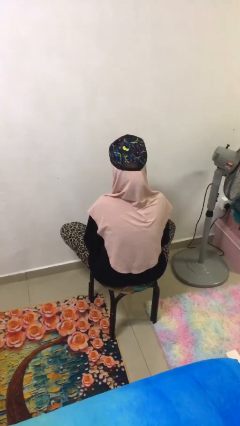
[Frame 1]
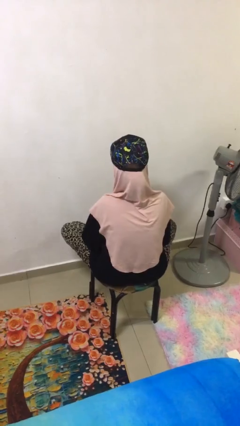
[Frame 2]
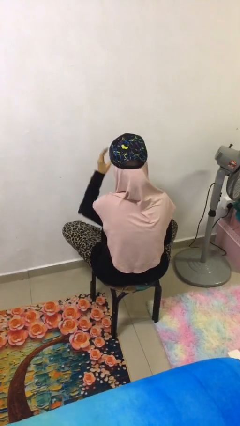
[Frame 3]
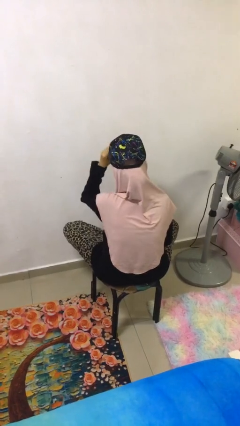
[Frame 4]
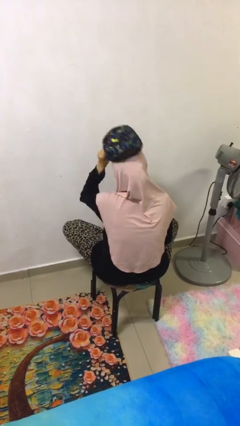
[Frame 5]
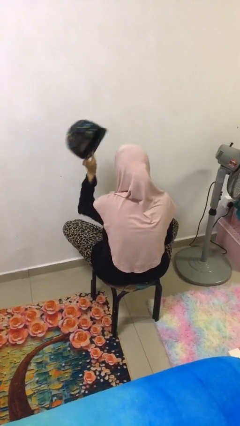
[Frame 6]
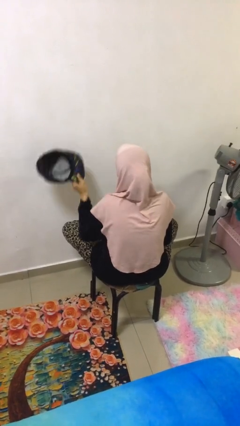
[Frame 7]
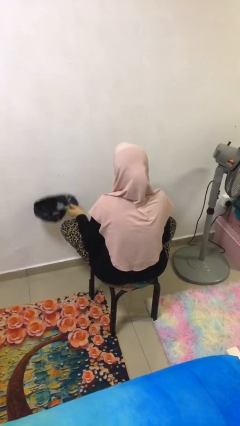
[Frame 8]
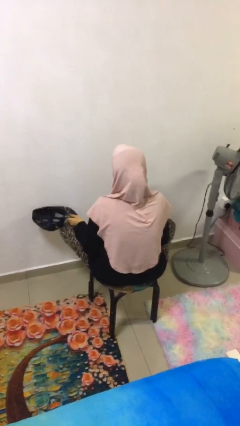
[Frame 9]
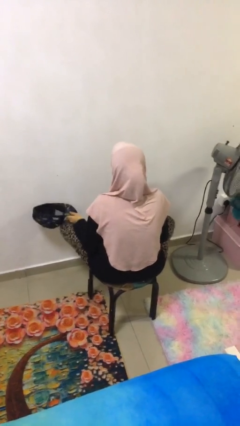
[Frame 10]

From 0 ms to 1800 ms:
person takes off hat

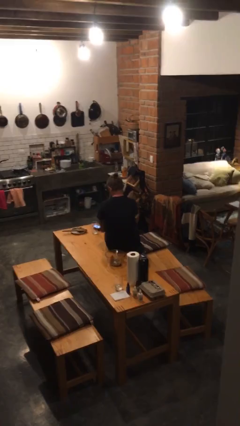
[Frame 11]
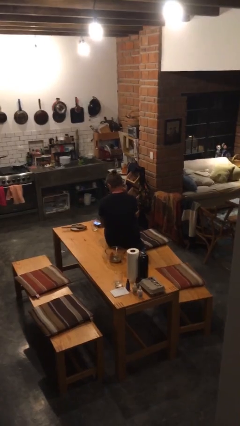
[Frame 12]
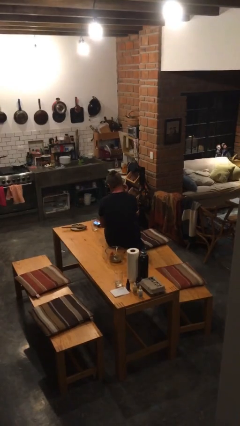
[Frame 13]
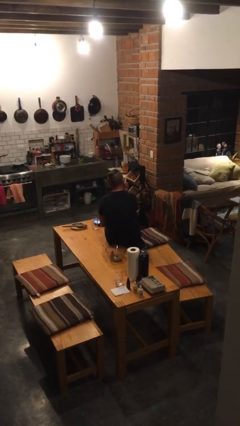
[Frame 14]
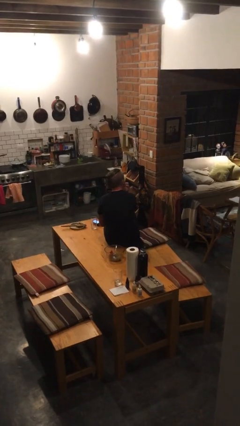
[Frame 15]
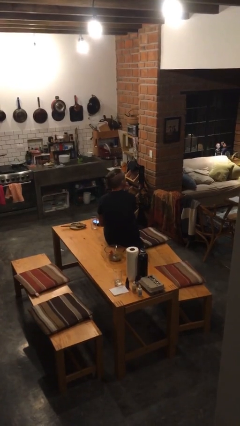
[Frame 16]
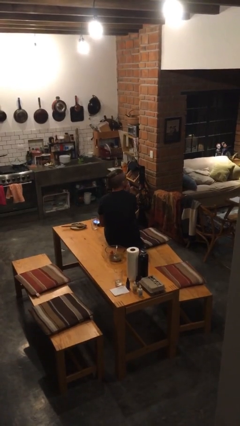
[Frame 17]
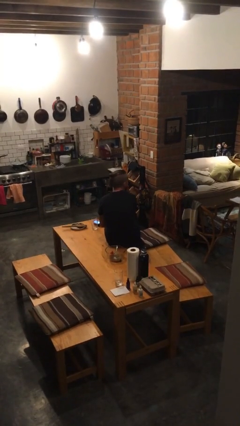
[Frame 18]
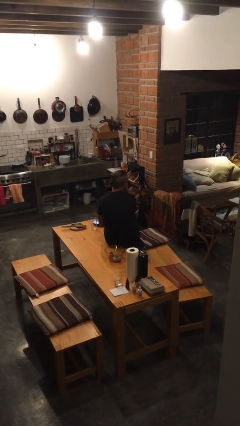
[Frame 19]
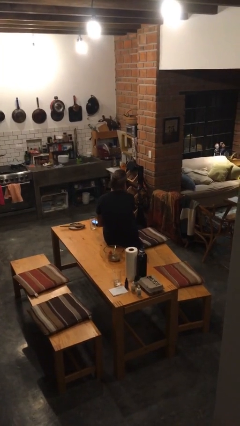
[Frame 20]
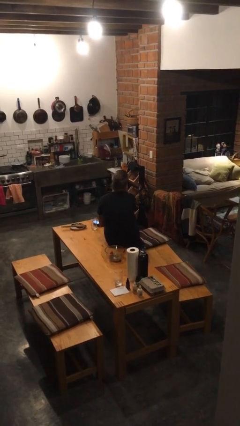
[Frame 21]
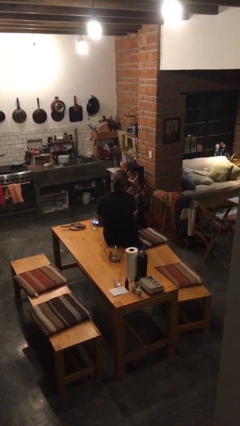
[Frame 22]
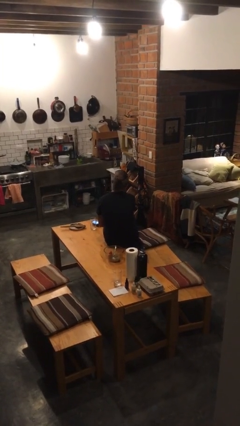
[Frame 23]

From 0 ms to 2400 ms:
person strokes chin

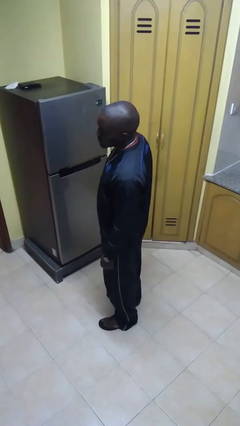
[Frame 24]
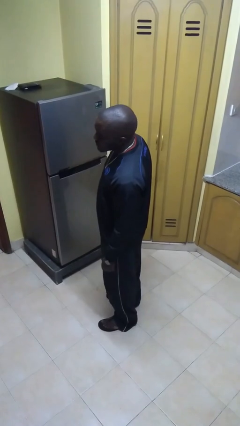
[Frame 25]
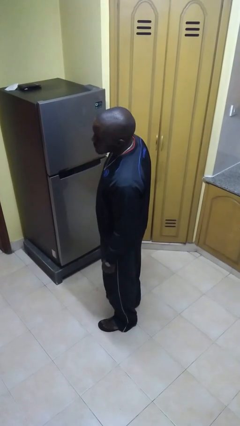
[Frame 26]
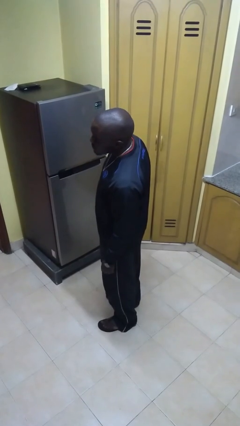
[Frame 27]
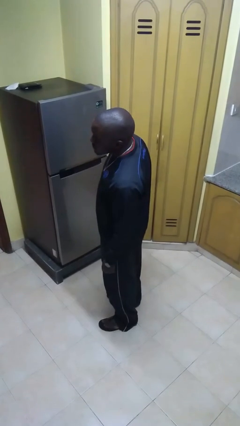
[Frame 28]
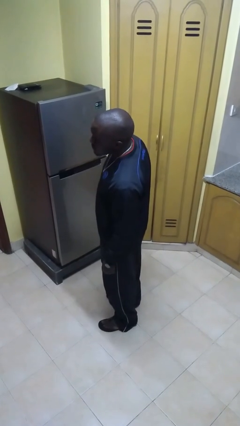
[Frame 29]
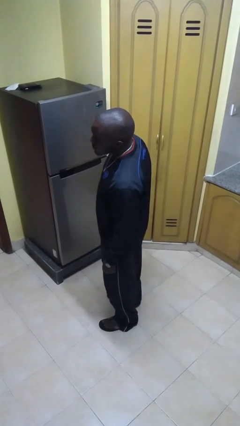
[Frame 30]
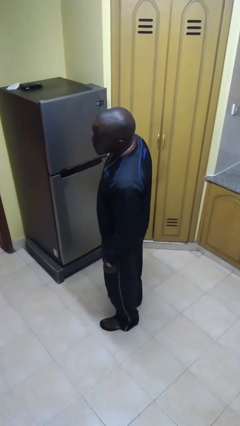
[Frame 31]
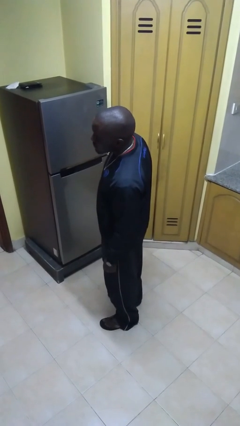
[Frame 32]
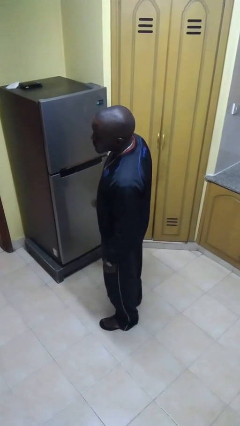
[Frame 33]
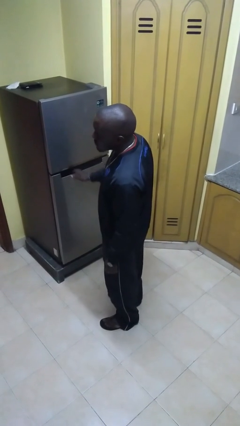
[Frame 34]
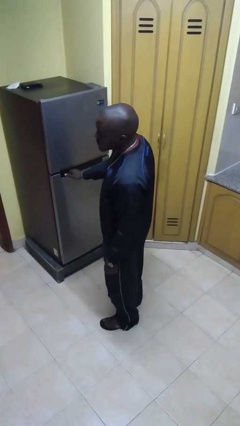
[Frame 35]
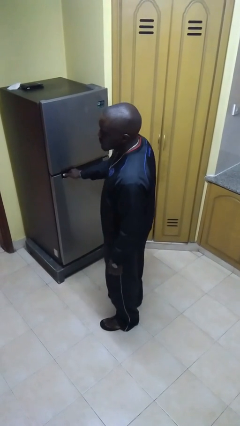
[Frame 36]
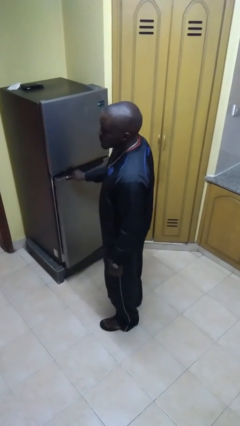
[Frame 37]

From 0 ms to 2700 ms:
person washes hands

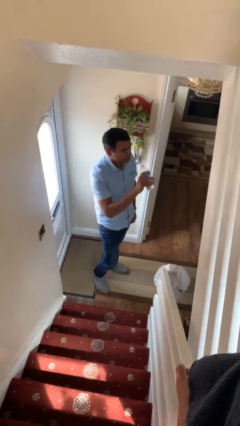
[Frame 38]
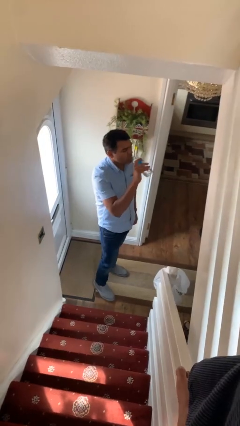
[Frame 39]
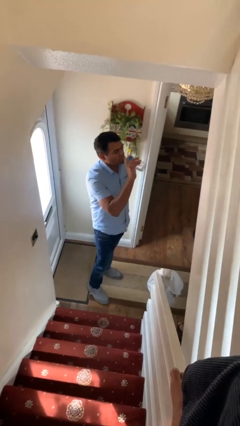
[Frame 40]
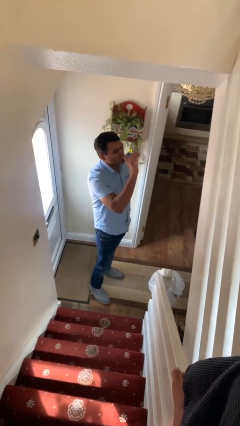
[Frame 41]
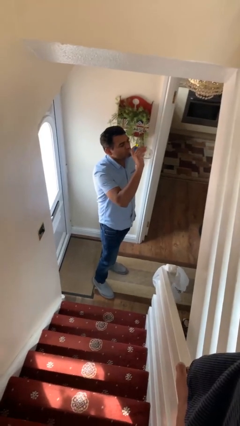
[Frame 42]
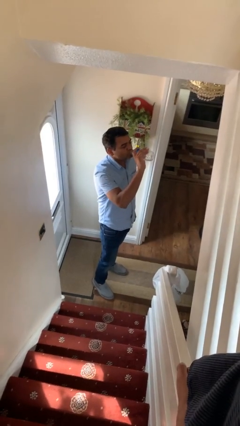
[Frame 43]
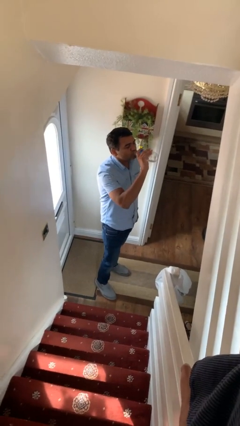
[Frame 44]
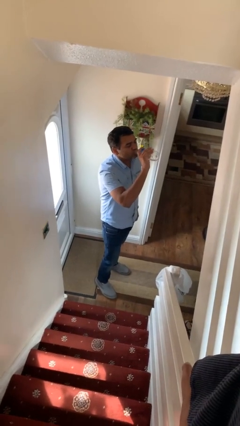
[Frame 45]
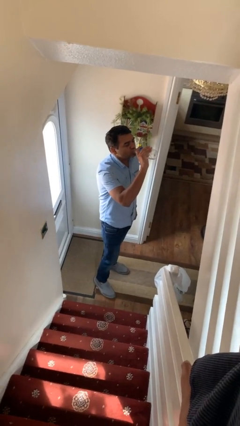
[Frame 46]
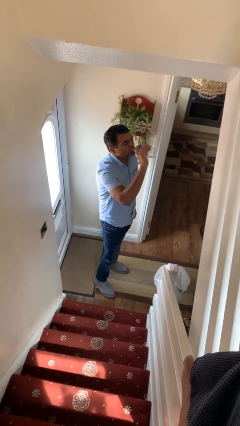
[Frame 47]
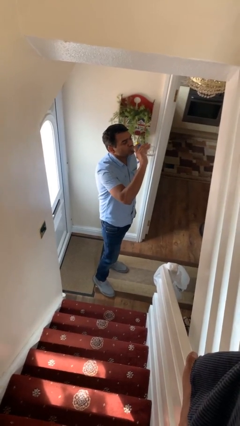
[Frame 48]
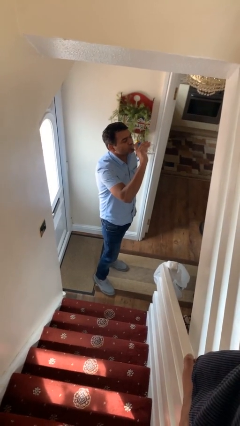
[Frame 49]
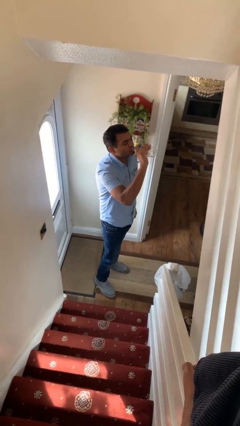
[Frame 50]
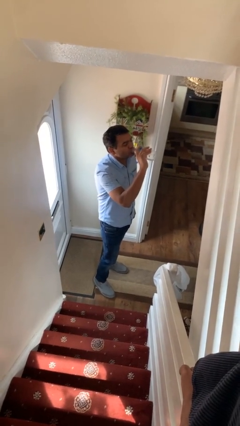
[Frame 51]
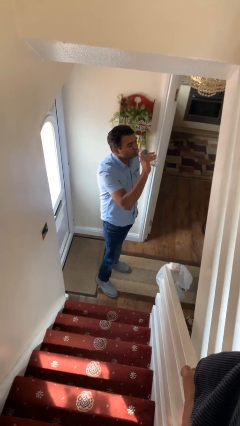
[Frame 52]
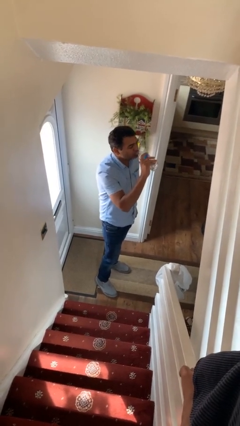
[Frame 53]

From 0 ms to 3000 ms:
person drinks from bottle

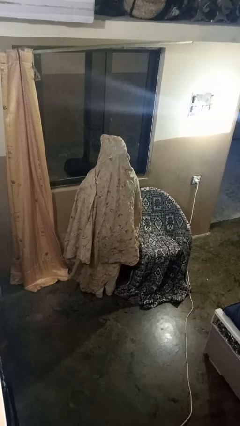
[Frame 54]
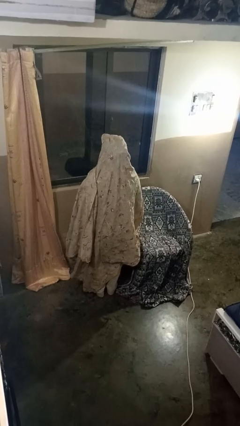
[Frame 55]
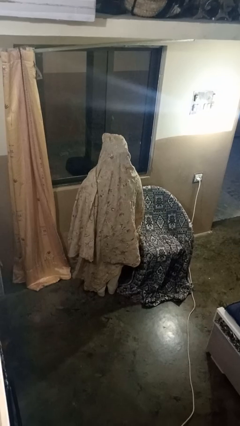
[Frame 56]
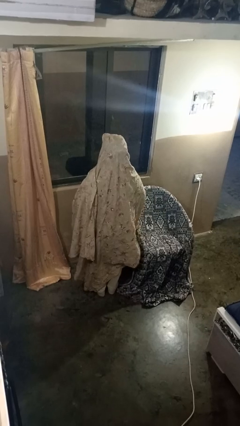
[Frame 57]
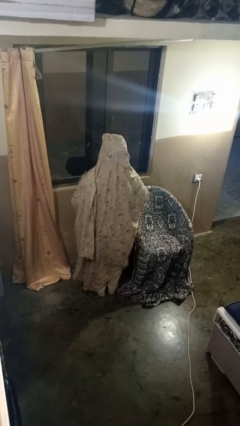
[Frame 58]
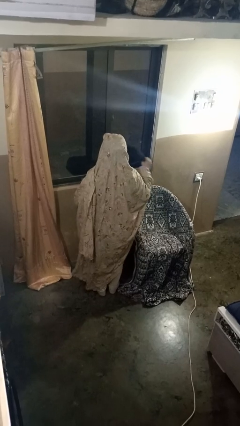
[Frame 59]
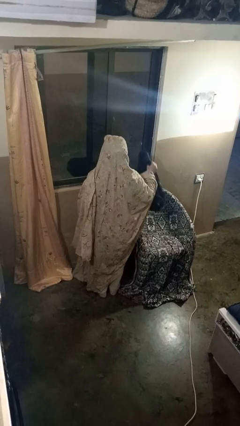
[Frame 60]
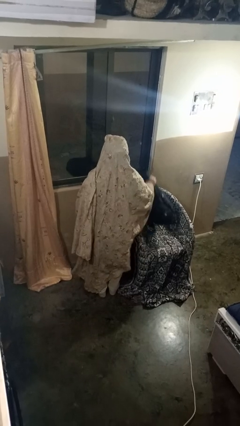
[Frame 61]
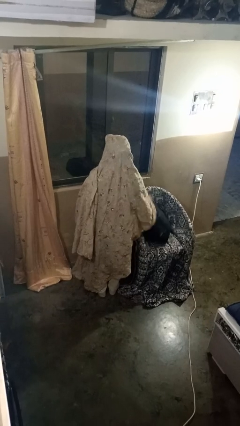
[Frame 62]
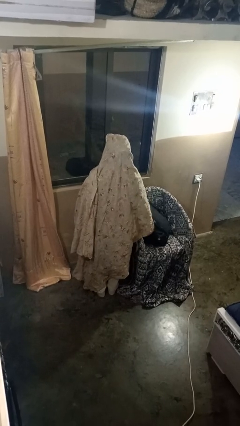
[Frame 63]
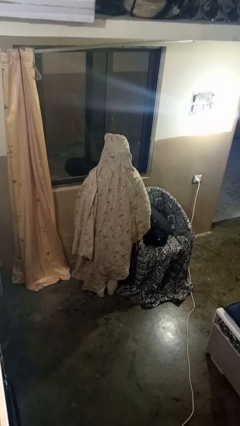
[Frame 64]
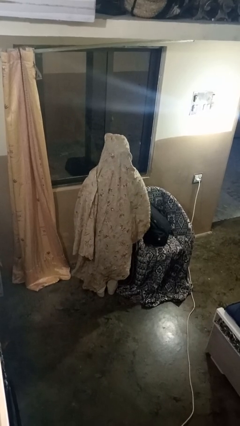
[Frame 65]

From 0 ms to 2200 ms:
person puts down object on couch

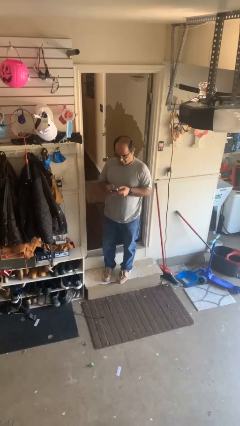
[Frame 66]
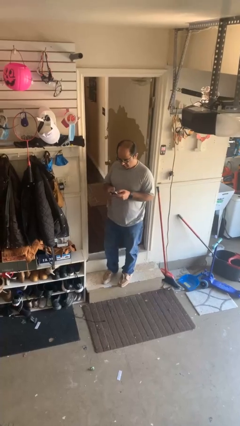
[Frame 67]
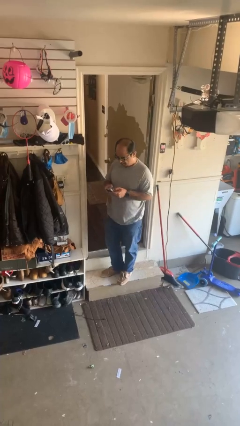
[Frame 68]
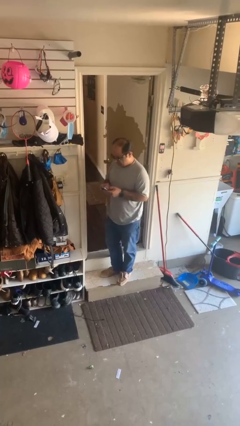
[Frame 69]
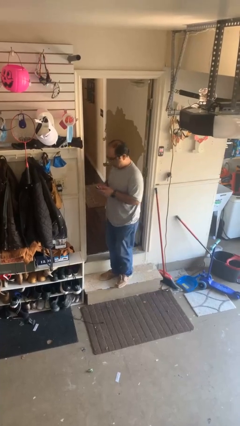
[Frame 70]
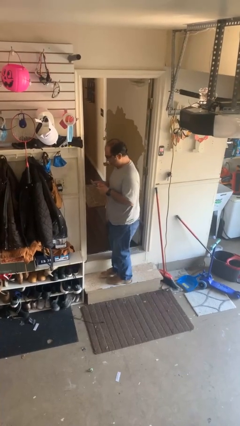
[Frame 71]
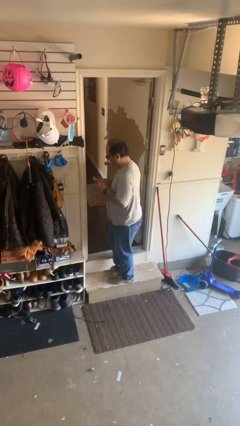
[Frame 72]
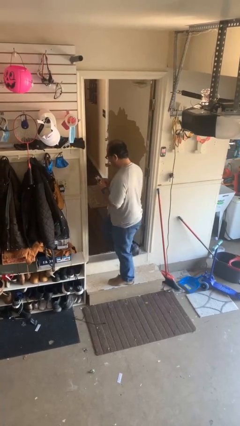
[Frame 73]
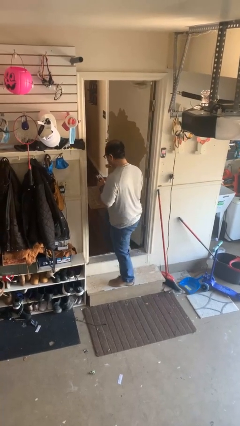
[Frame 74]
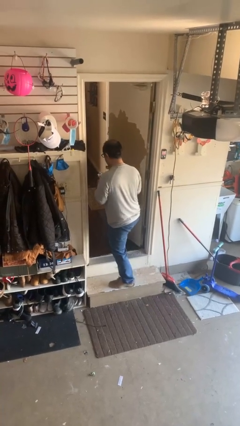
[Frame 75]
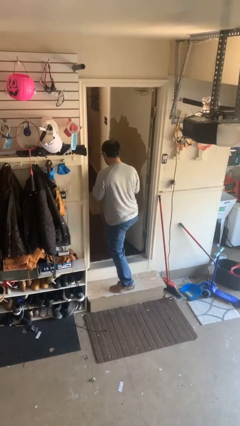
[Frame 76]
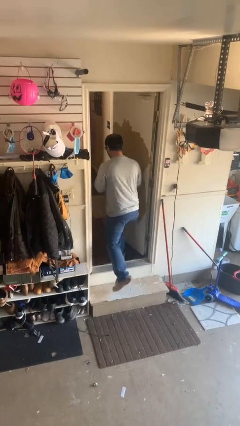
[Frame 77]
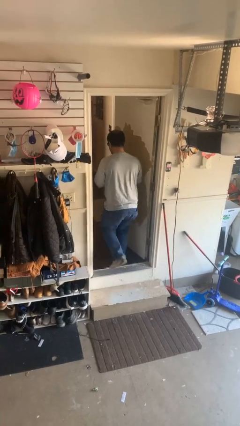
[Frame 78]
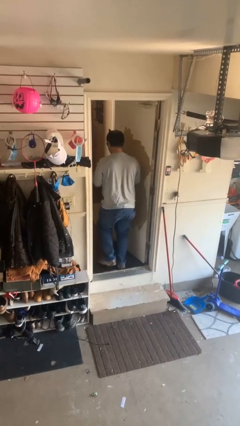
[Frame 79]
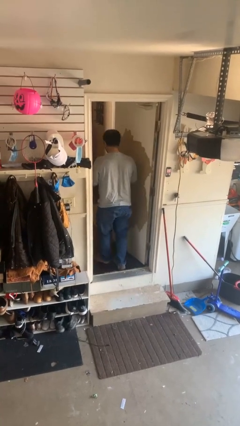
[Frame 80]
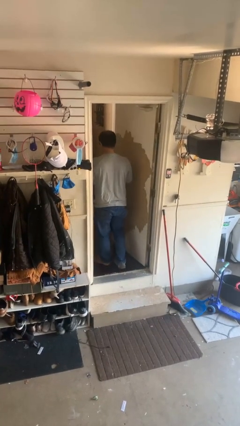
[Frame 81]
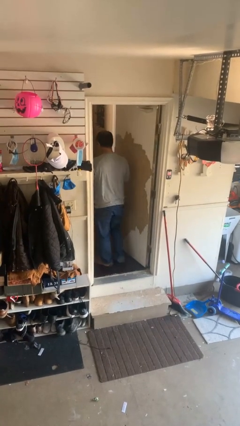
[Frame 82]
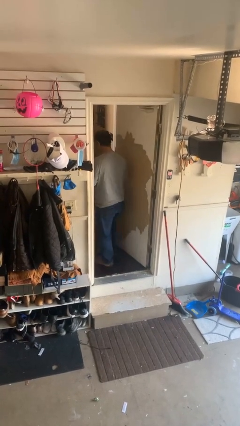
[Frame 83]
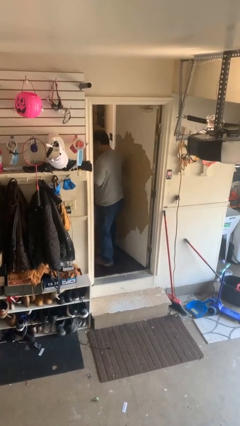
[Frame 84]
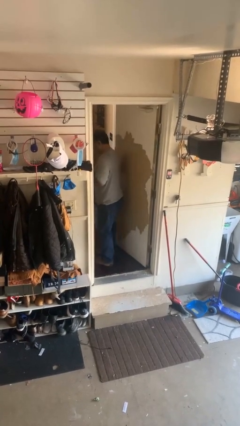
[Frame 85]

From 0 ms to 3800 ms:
person exits scene through structure

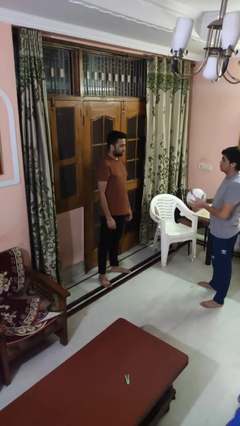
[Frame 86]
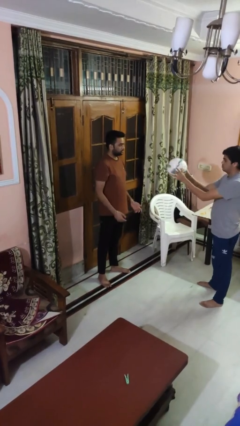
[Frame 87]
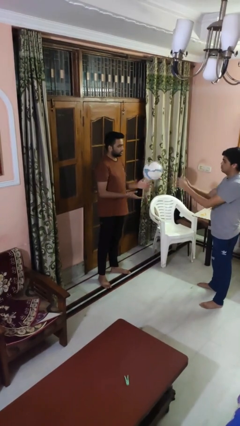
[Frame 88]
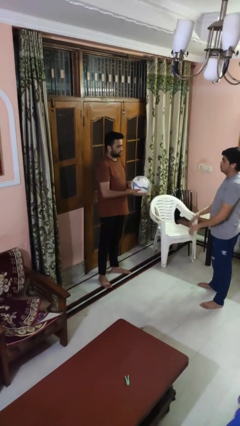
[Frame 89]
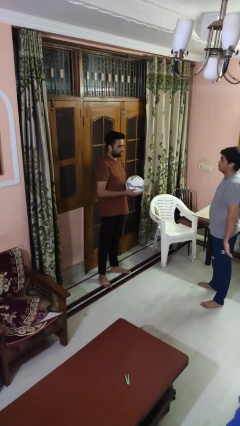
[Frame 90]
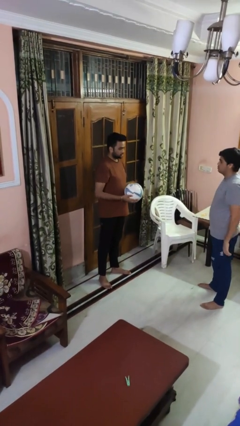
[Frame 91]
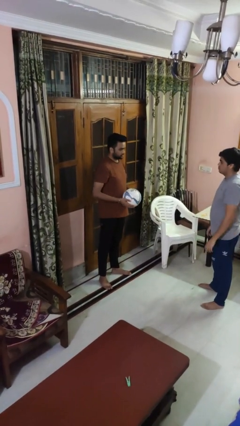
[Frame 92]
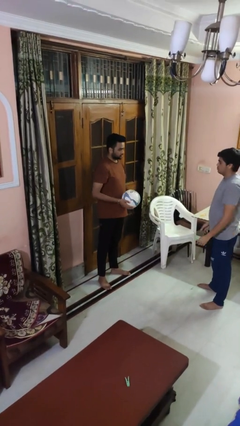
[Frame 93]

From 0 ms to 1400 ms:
person catches object from person
